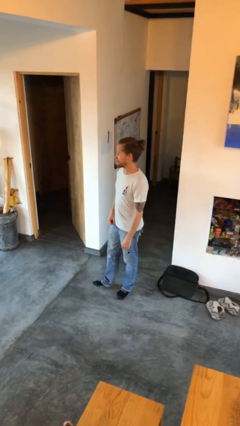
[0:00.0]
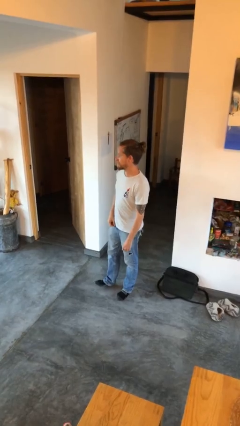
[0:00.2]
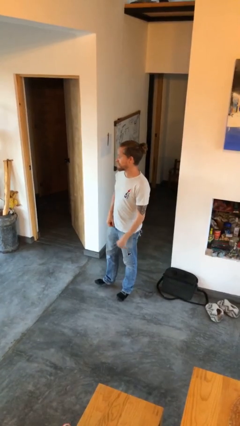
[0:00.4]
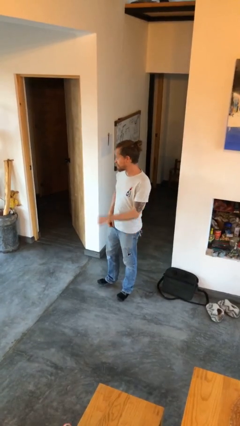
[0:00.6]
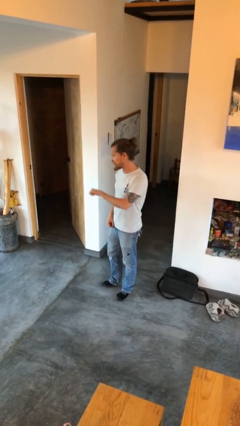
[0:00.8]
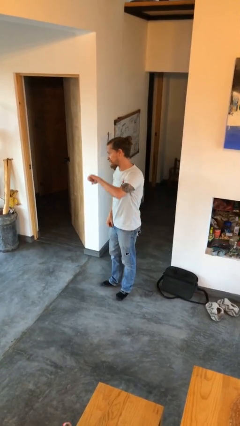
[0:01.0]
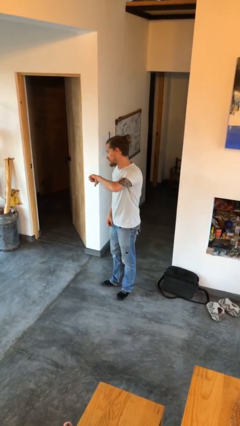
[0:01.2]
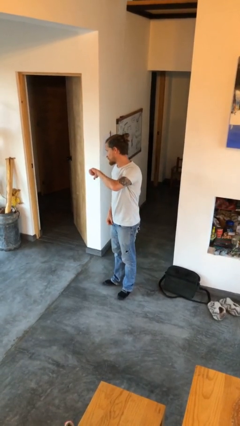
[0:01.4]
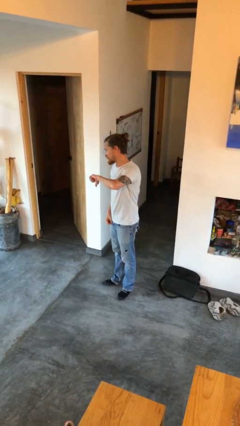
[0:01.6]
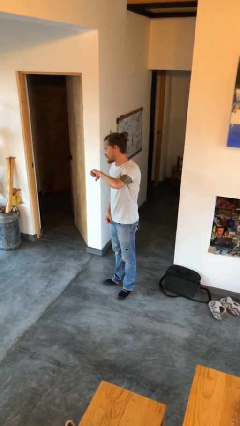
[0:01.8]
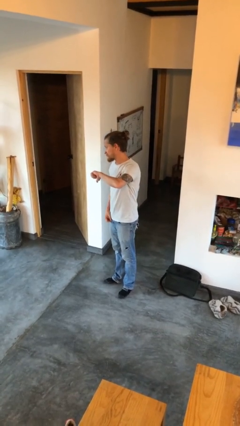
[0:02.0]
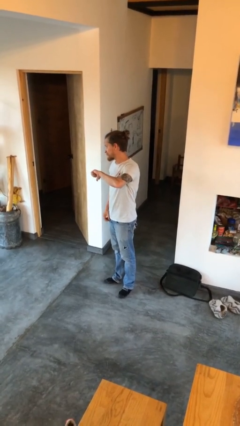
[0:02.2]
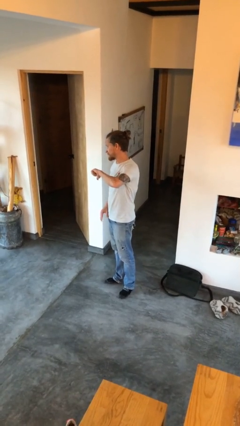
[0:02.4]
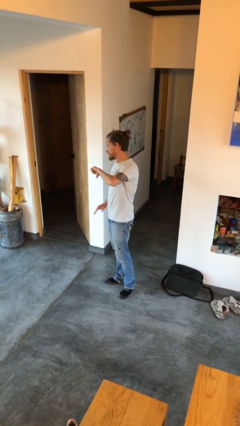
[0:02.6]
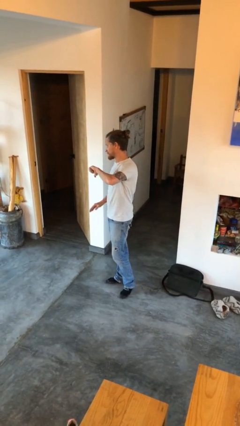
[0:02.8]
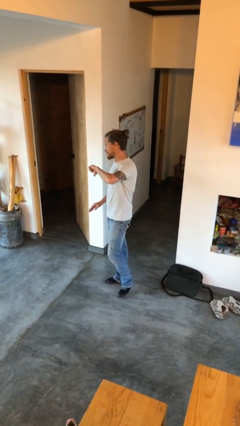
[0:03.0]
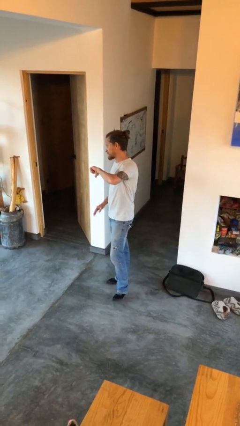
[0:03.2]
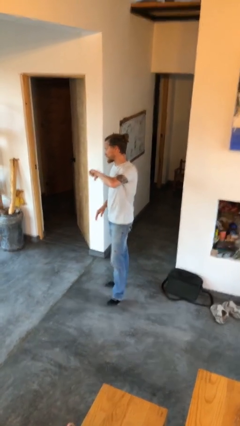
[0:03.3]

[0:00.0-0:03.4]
person gestures thumbs down

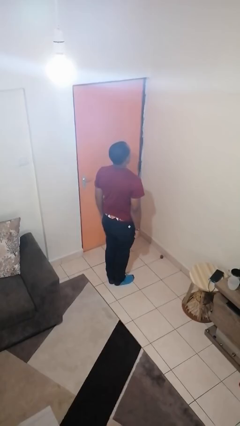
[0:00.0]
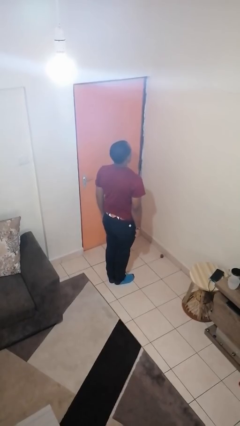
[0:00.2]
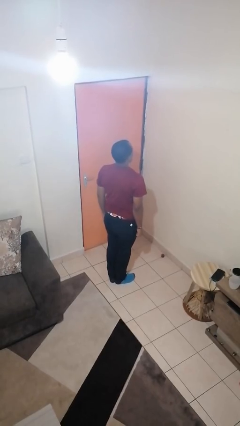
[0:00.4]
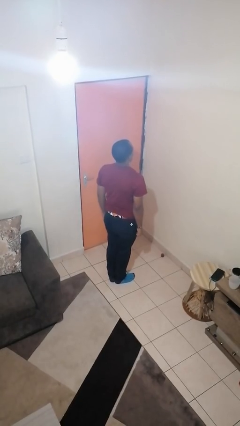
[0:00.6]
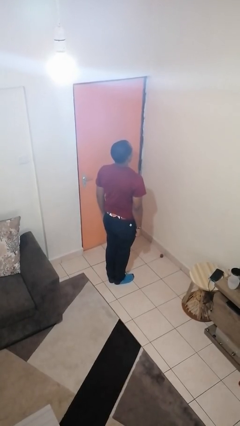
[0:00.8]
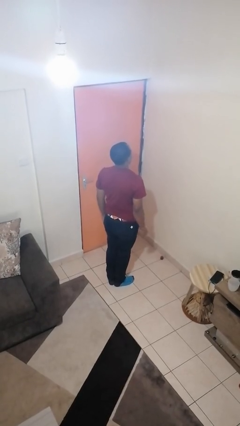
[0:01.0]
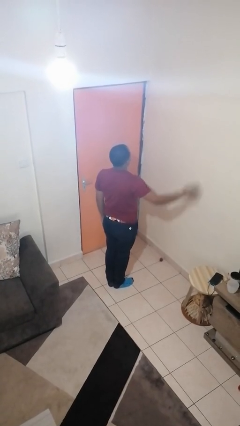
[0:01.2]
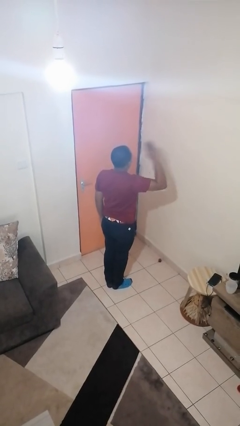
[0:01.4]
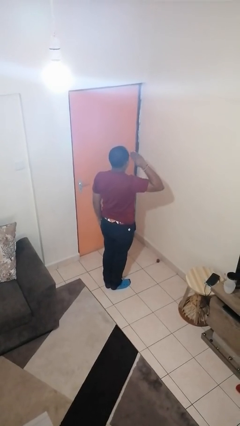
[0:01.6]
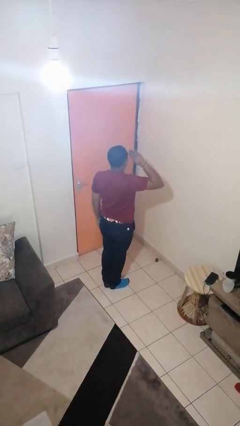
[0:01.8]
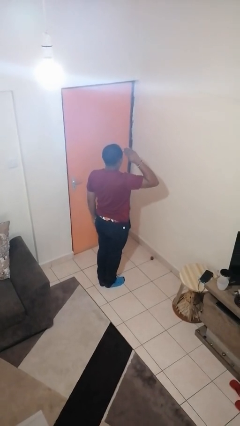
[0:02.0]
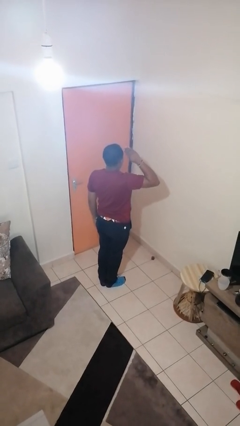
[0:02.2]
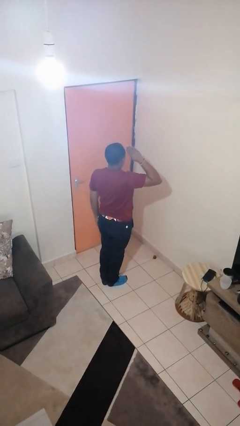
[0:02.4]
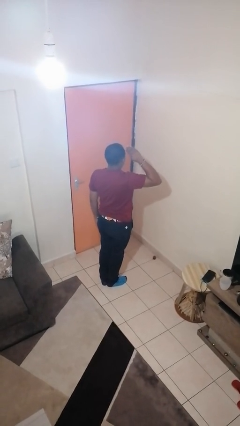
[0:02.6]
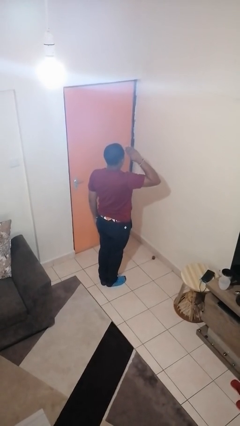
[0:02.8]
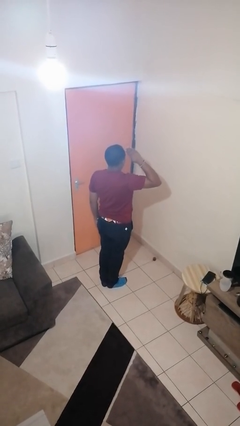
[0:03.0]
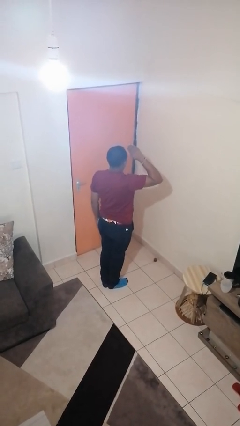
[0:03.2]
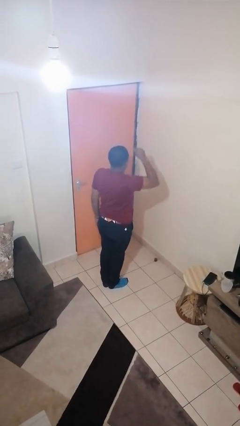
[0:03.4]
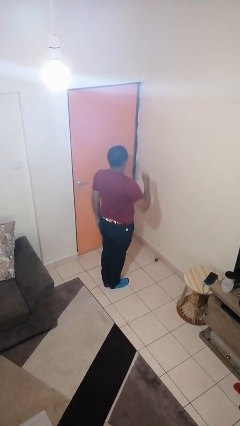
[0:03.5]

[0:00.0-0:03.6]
person salutes

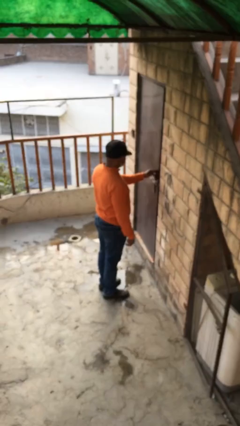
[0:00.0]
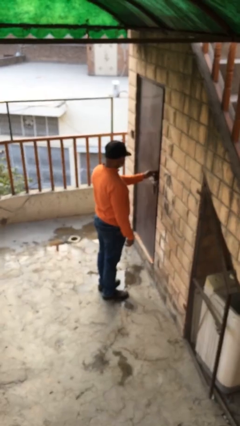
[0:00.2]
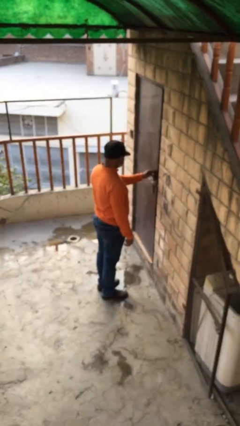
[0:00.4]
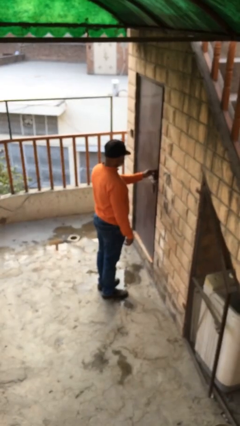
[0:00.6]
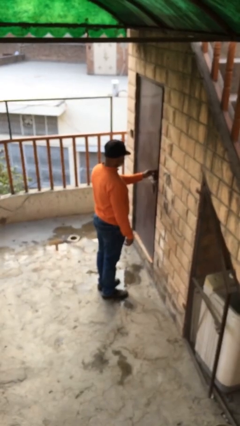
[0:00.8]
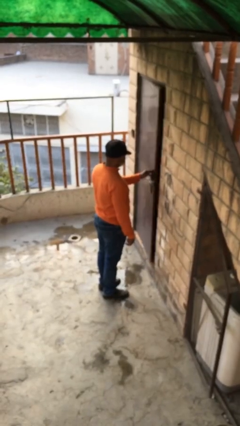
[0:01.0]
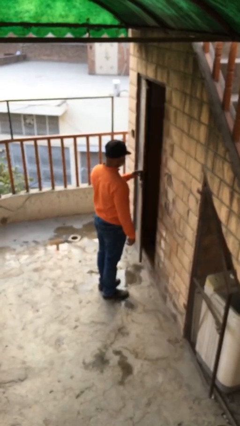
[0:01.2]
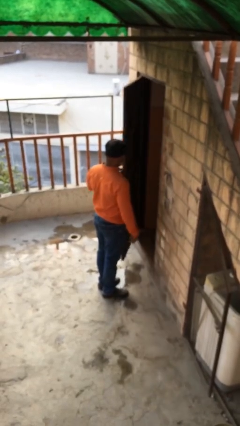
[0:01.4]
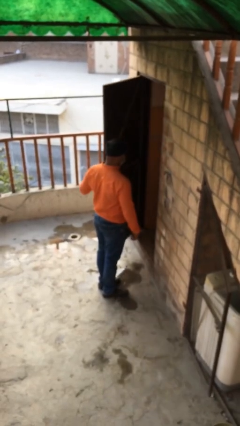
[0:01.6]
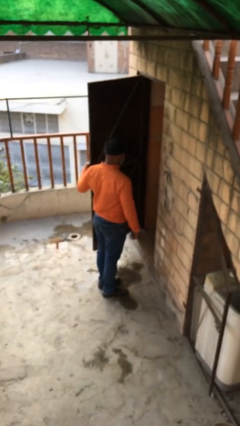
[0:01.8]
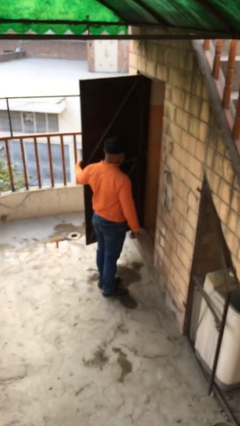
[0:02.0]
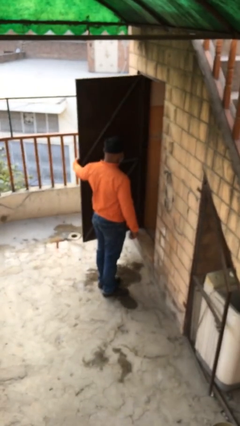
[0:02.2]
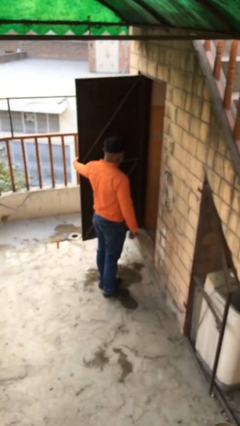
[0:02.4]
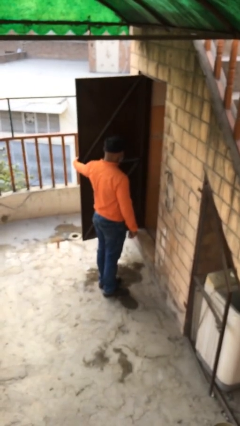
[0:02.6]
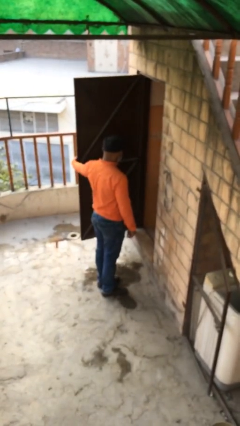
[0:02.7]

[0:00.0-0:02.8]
person opens facility door

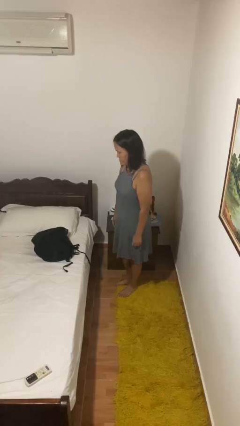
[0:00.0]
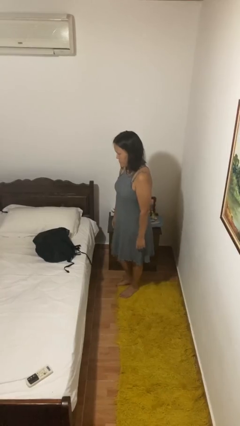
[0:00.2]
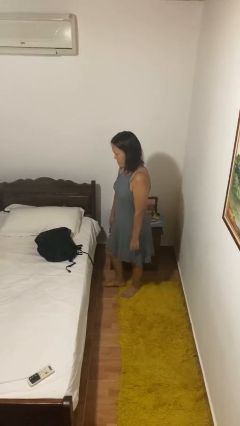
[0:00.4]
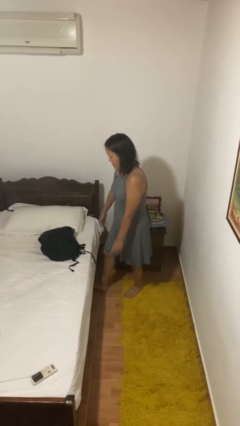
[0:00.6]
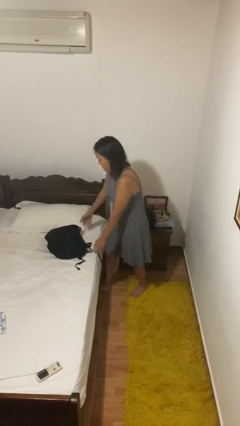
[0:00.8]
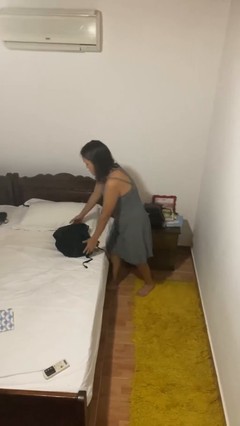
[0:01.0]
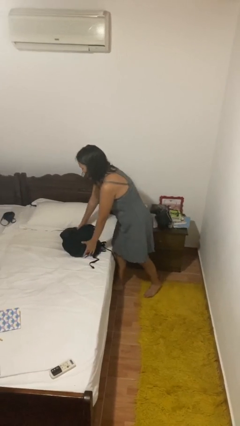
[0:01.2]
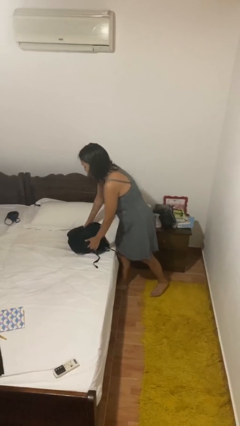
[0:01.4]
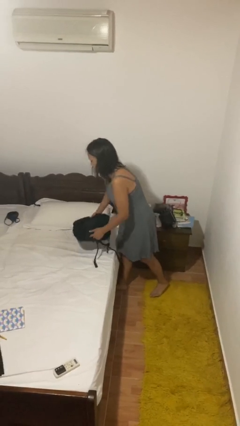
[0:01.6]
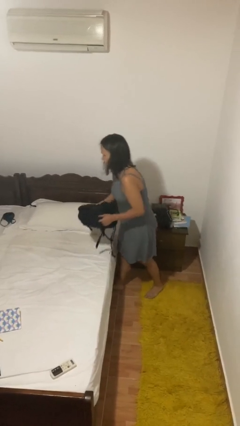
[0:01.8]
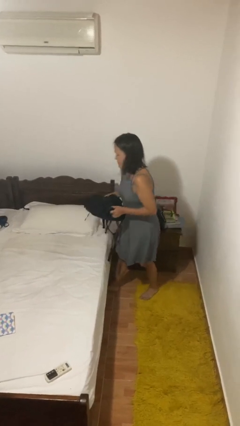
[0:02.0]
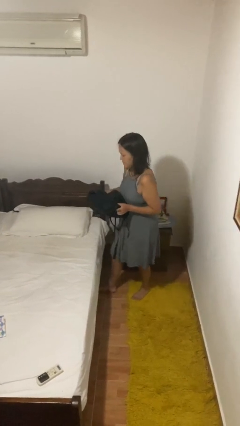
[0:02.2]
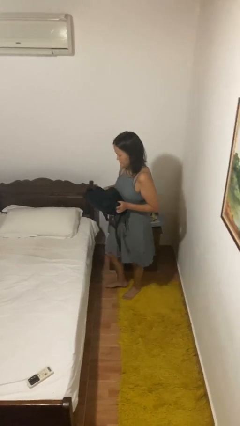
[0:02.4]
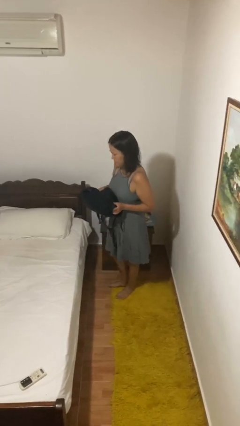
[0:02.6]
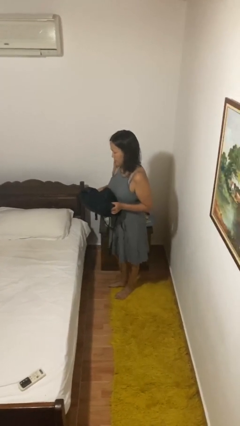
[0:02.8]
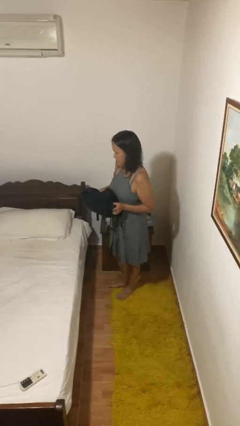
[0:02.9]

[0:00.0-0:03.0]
person picks up object from bed

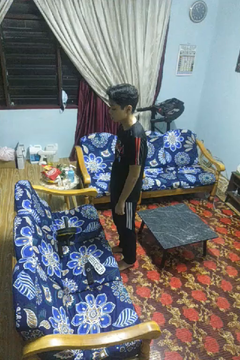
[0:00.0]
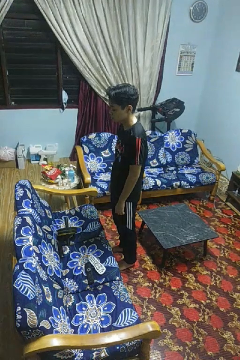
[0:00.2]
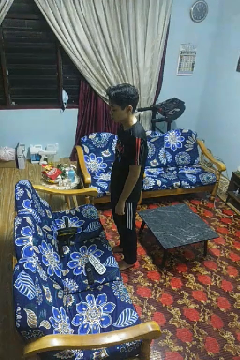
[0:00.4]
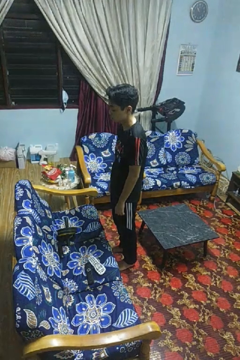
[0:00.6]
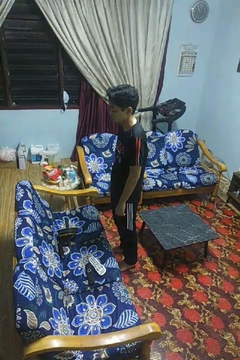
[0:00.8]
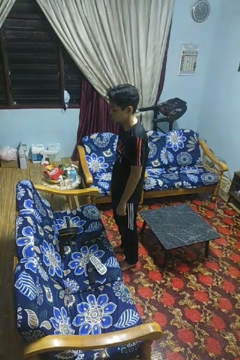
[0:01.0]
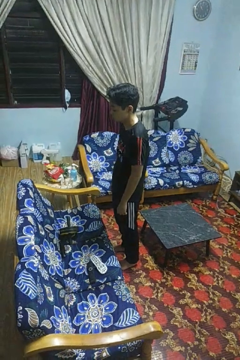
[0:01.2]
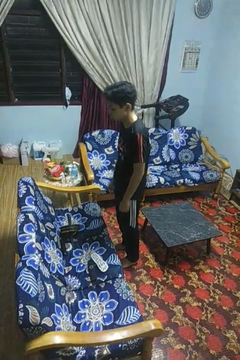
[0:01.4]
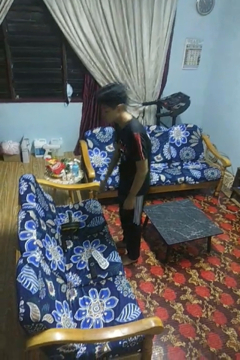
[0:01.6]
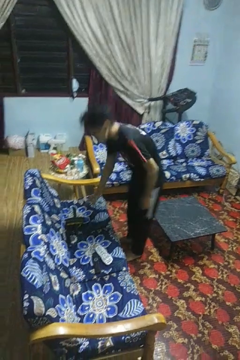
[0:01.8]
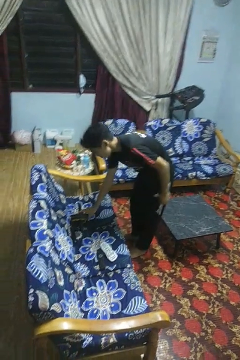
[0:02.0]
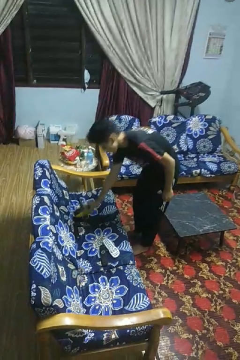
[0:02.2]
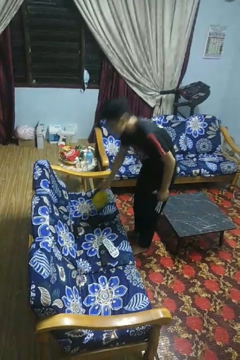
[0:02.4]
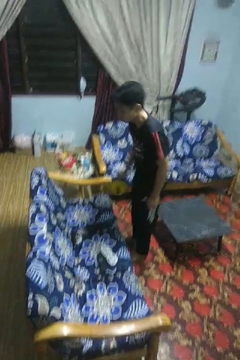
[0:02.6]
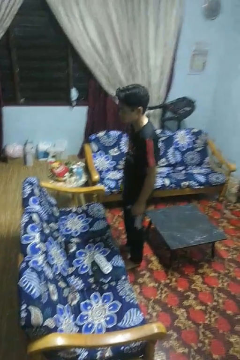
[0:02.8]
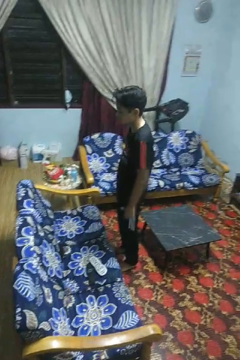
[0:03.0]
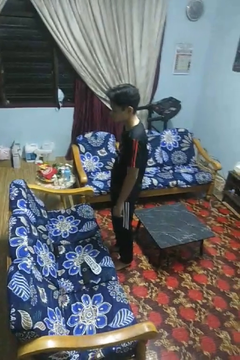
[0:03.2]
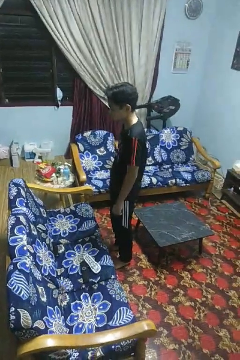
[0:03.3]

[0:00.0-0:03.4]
person picks up object from couch

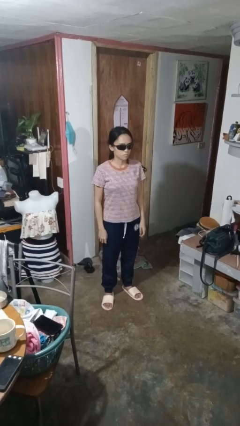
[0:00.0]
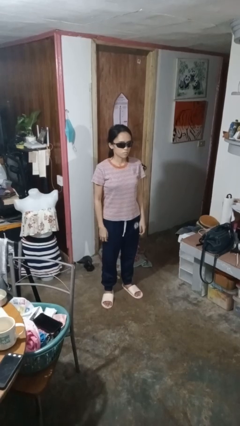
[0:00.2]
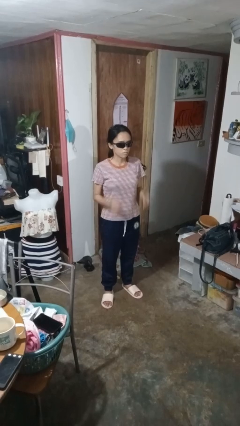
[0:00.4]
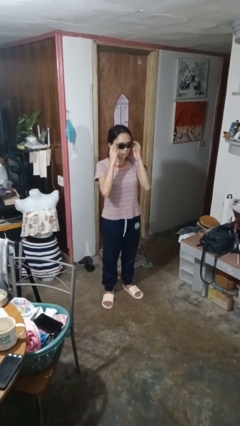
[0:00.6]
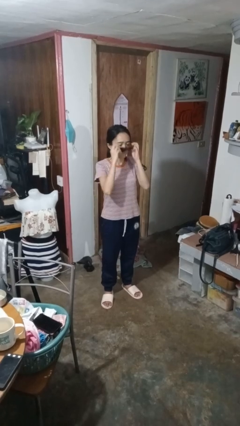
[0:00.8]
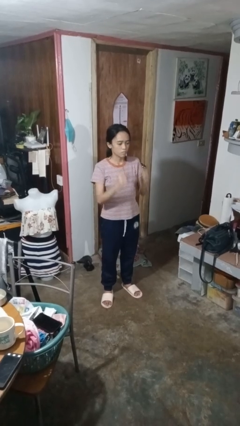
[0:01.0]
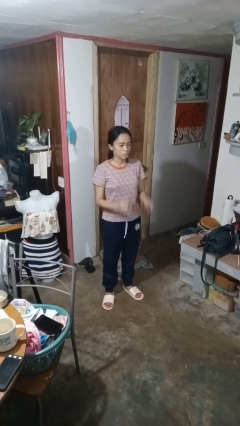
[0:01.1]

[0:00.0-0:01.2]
person takes off sunglasses
